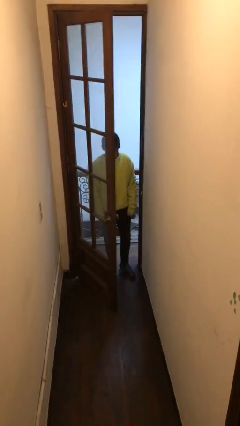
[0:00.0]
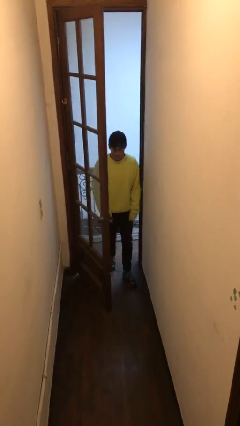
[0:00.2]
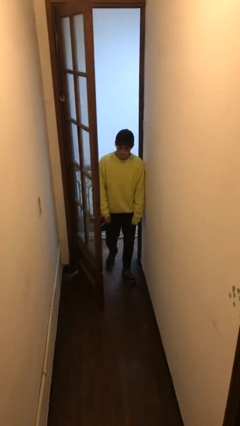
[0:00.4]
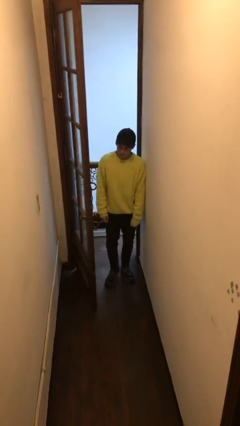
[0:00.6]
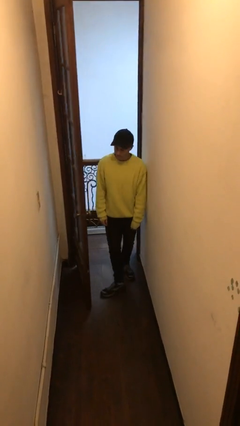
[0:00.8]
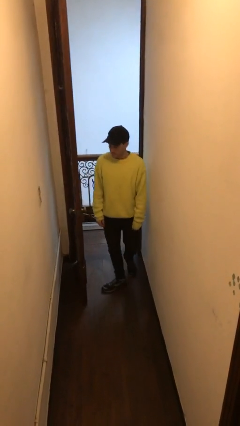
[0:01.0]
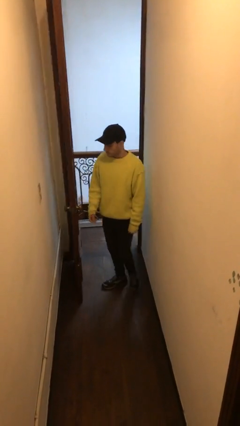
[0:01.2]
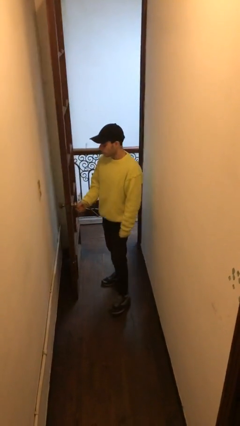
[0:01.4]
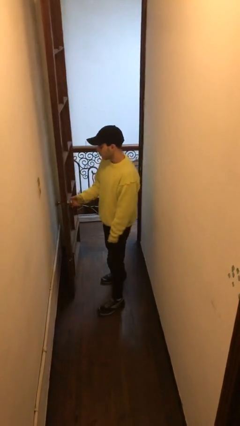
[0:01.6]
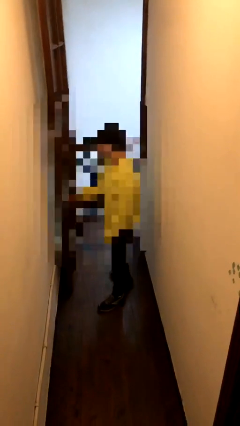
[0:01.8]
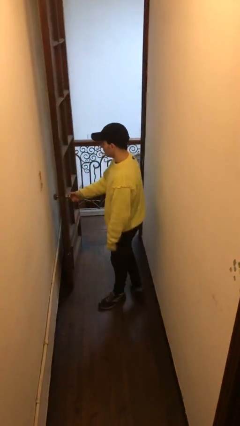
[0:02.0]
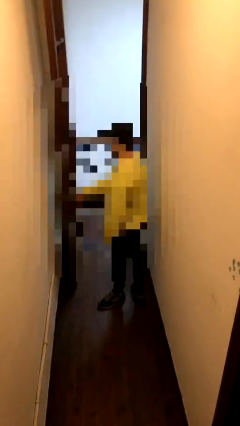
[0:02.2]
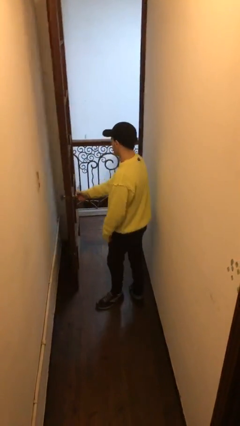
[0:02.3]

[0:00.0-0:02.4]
person enters scene through structure

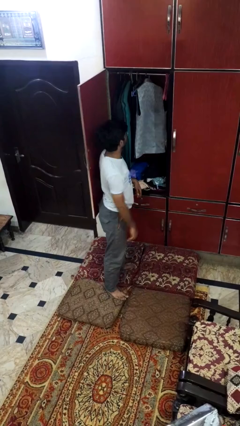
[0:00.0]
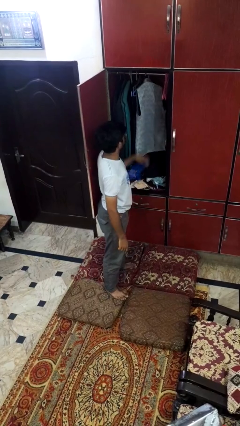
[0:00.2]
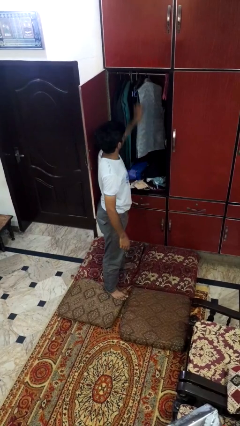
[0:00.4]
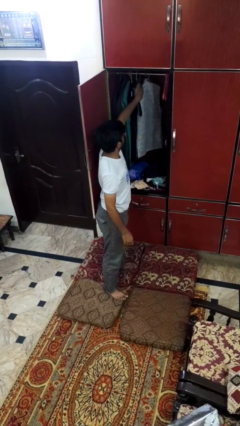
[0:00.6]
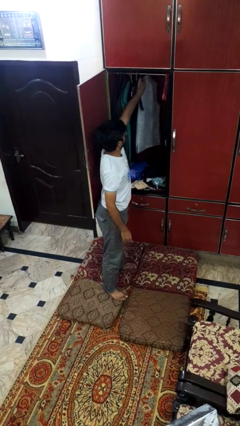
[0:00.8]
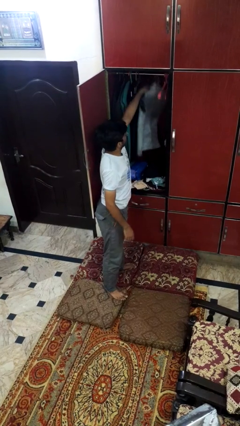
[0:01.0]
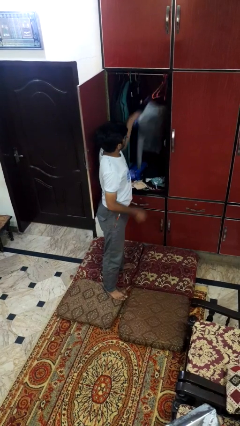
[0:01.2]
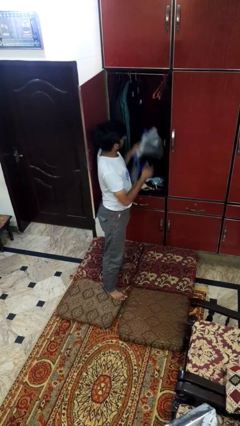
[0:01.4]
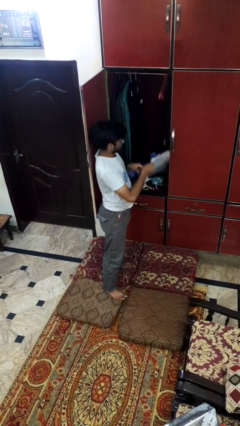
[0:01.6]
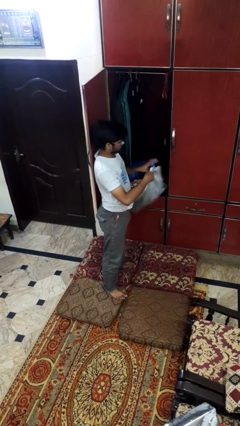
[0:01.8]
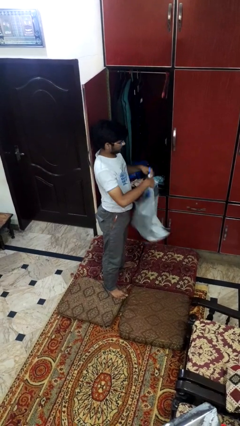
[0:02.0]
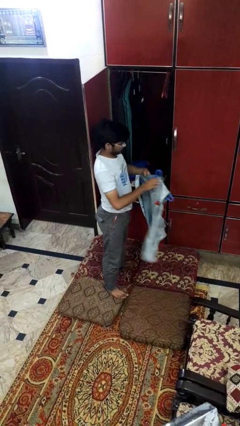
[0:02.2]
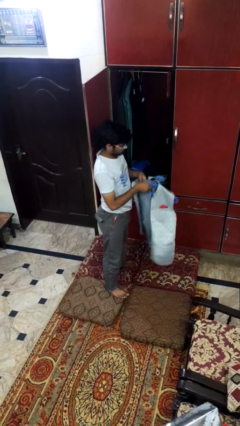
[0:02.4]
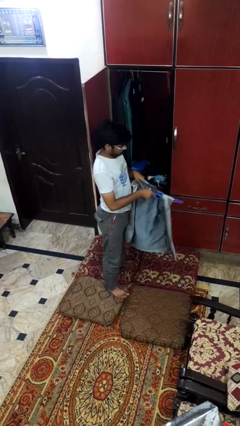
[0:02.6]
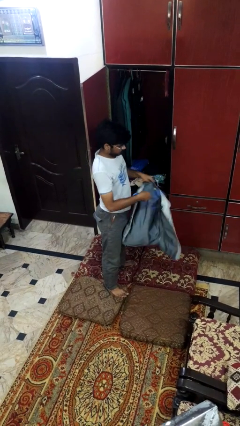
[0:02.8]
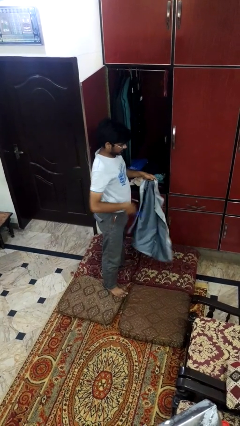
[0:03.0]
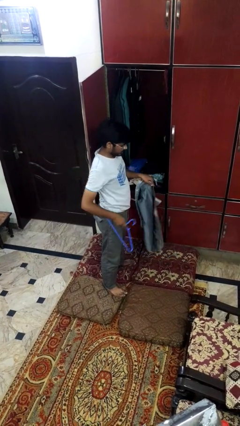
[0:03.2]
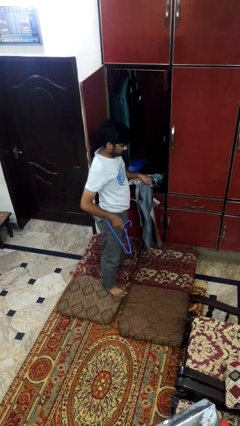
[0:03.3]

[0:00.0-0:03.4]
person takes clothes from closet

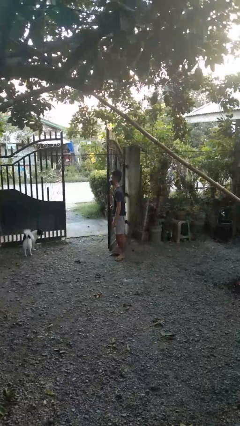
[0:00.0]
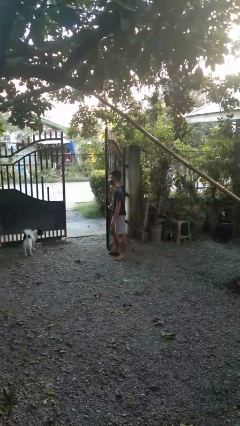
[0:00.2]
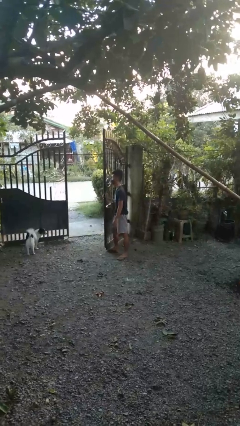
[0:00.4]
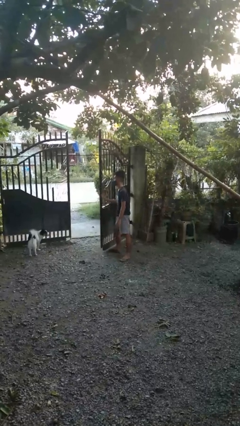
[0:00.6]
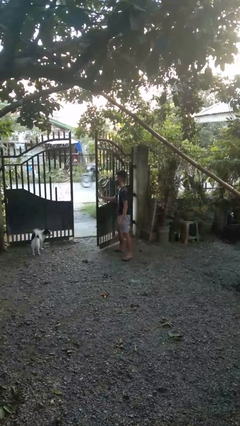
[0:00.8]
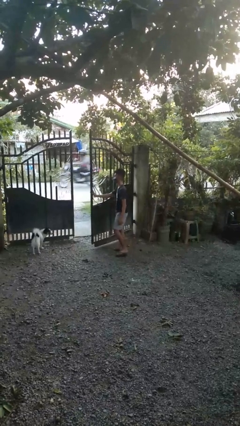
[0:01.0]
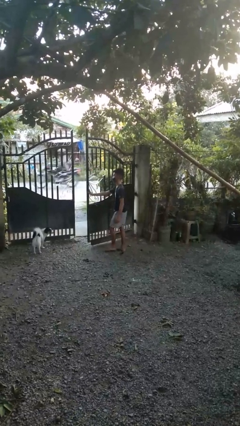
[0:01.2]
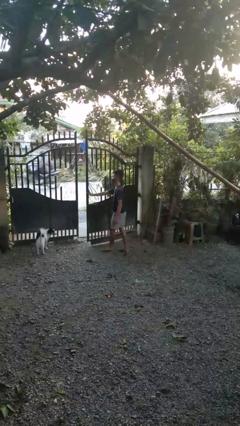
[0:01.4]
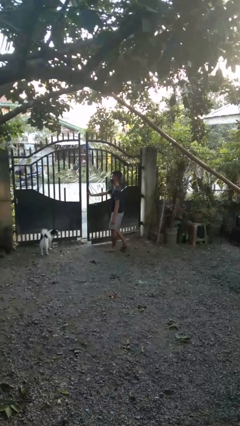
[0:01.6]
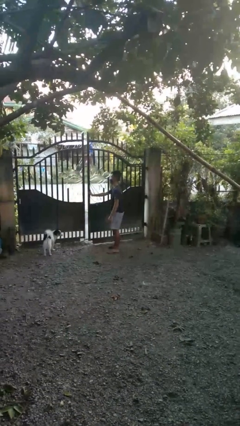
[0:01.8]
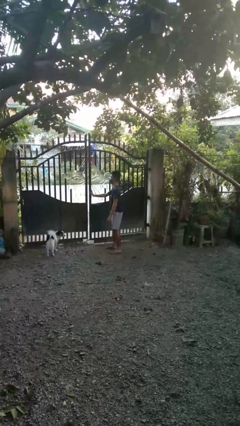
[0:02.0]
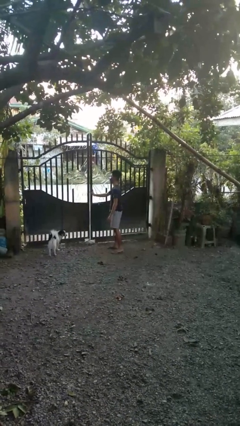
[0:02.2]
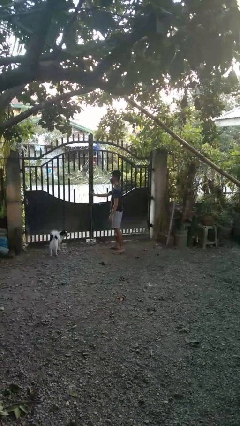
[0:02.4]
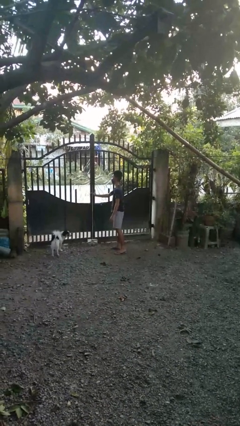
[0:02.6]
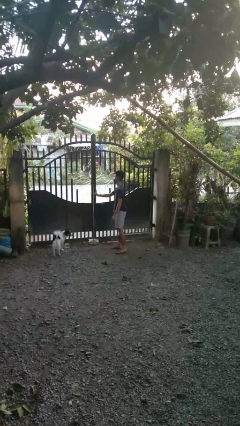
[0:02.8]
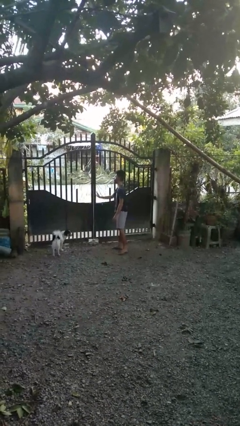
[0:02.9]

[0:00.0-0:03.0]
person closes gate

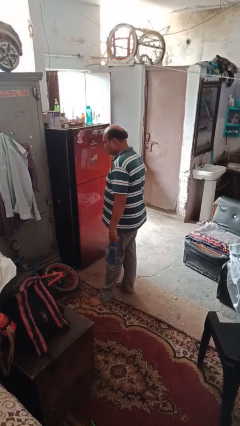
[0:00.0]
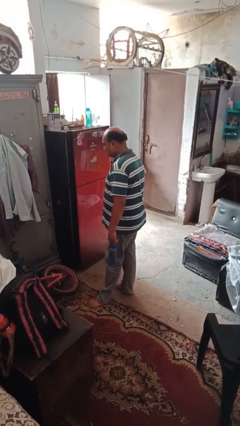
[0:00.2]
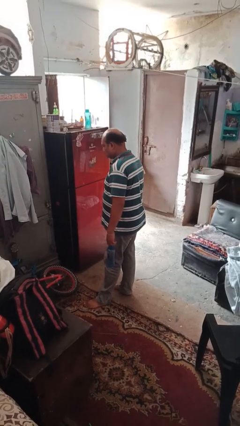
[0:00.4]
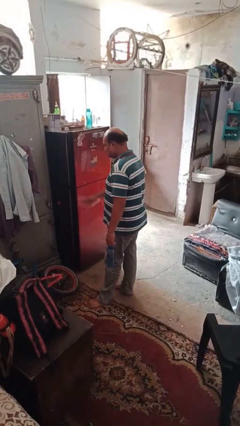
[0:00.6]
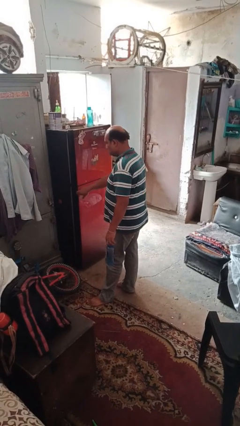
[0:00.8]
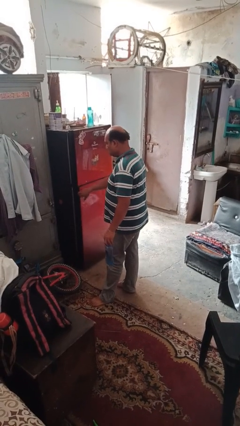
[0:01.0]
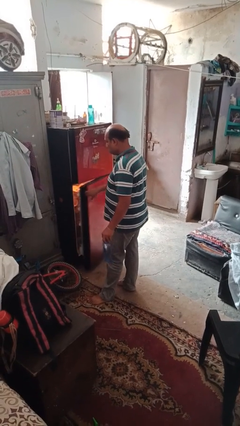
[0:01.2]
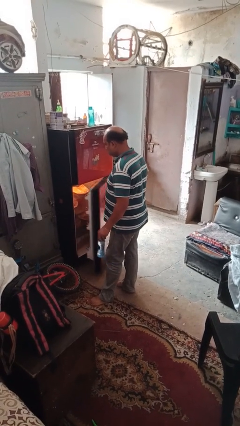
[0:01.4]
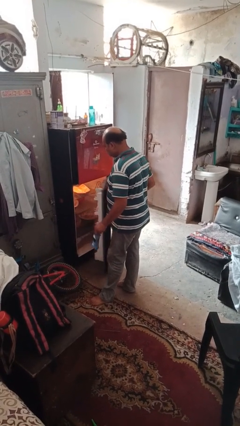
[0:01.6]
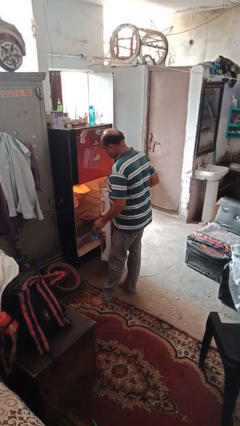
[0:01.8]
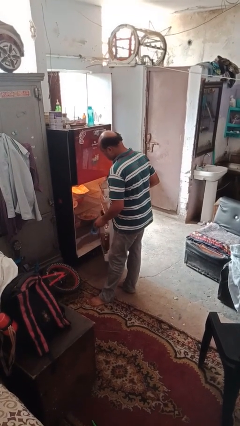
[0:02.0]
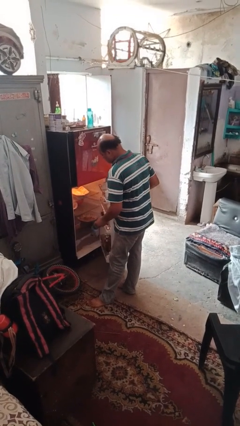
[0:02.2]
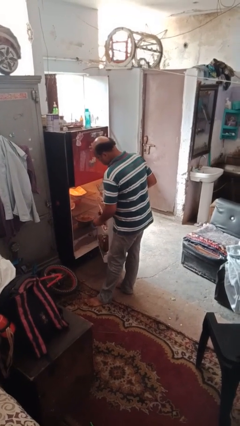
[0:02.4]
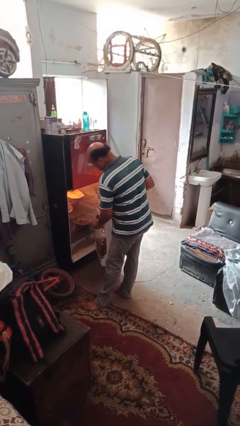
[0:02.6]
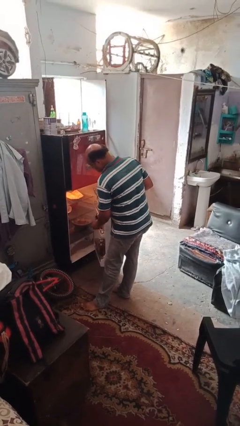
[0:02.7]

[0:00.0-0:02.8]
person opens refrigerator

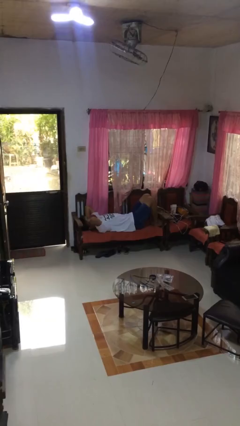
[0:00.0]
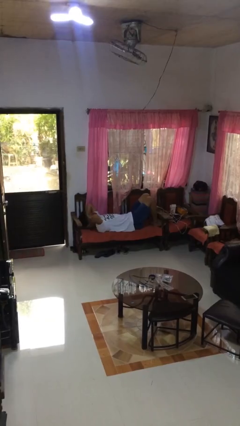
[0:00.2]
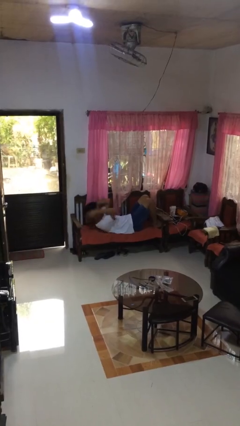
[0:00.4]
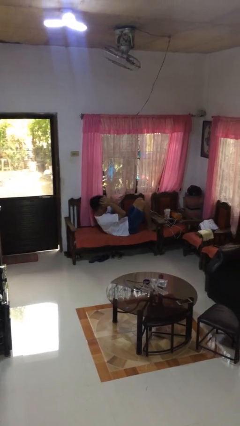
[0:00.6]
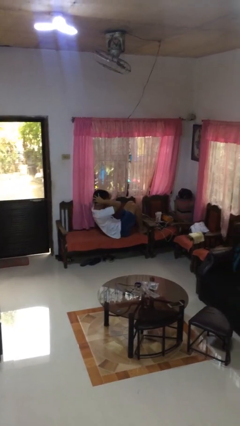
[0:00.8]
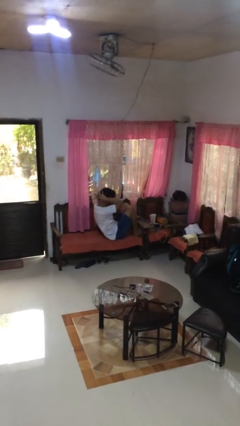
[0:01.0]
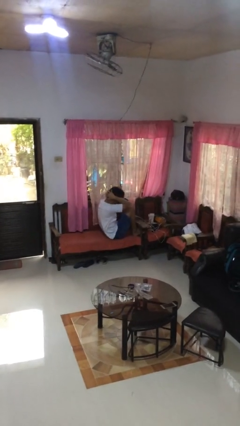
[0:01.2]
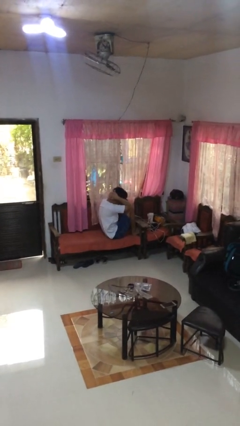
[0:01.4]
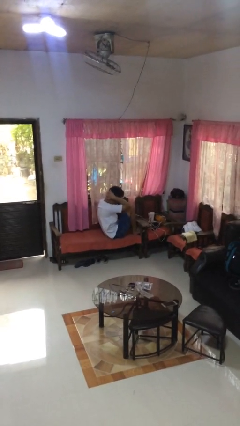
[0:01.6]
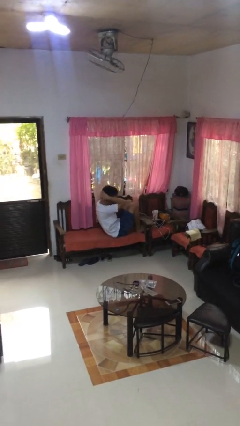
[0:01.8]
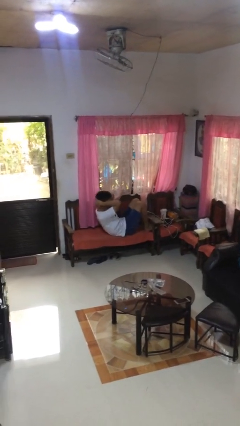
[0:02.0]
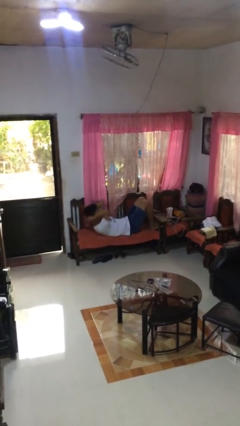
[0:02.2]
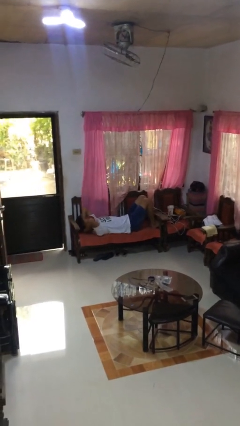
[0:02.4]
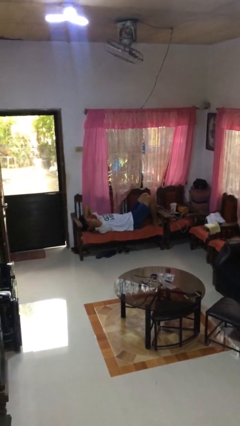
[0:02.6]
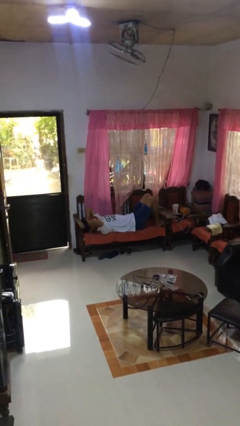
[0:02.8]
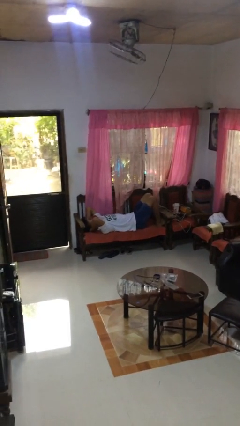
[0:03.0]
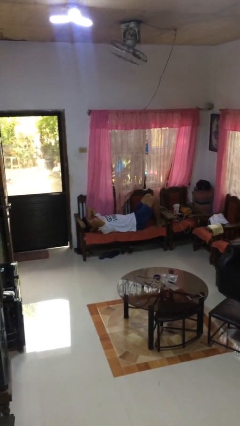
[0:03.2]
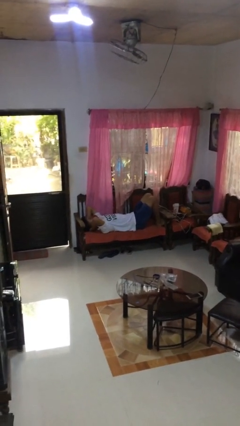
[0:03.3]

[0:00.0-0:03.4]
person exercises with situp

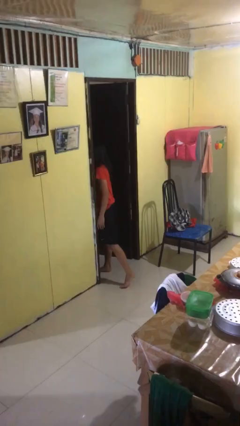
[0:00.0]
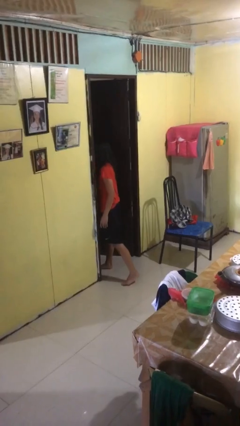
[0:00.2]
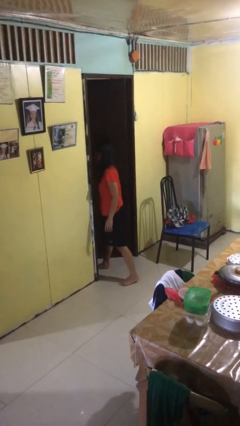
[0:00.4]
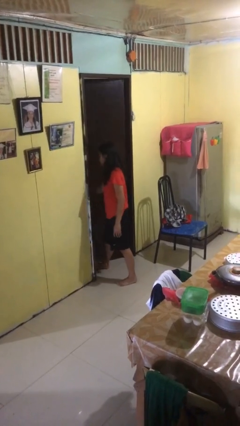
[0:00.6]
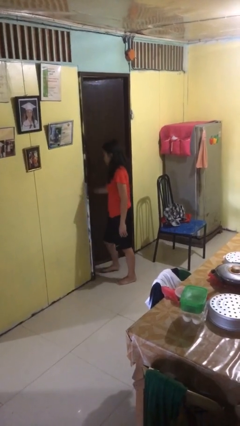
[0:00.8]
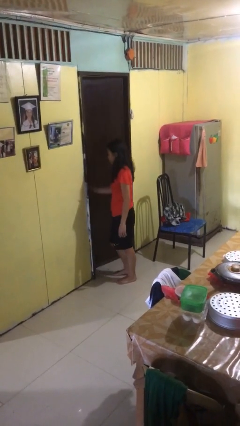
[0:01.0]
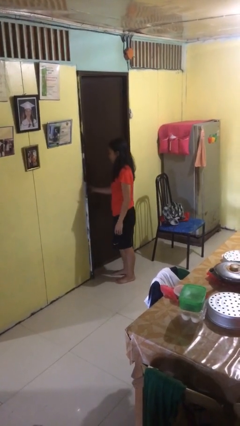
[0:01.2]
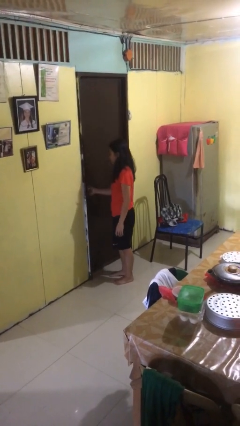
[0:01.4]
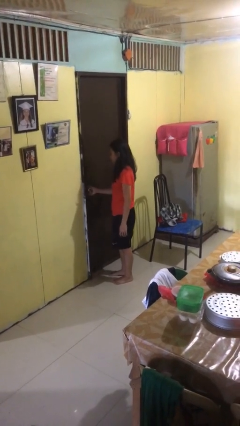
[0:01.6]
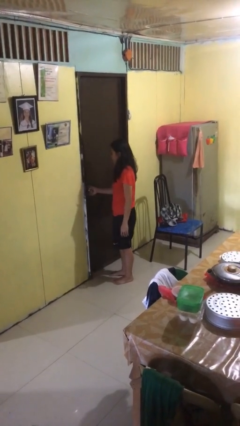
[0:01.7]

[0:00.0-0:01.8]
person closes facility door

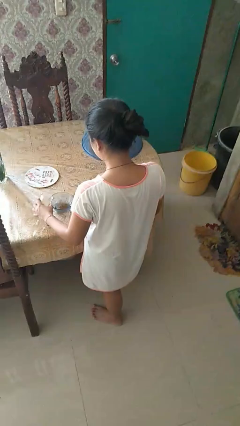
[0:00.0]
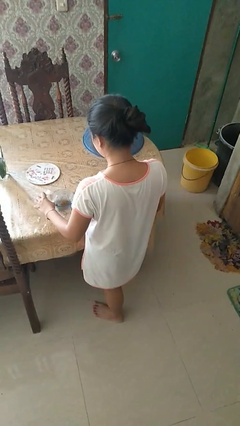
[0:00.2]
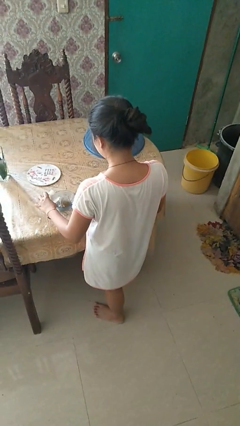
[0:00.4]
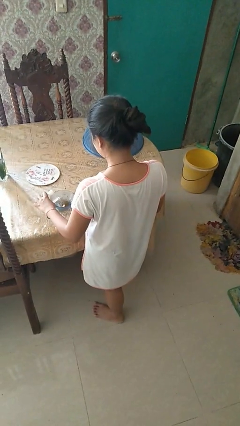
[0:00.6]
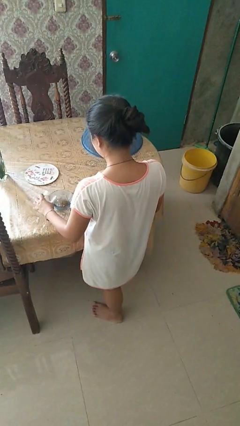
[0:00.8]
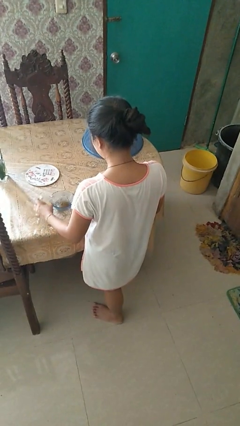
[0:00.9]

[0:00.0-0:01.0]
person pours into bowl
